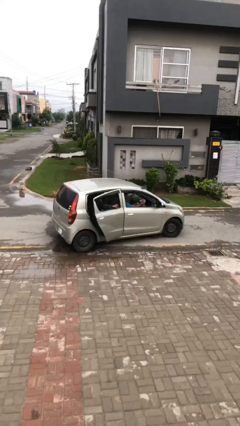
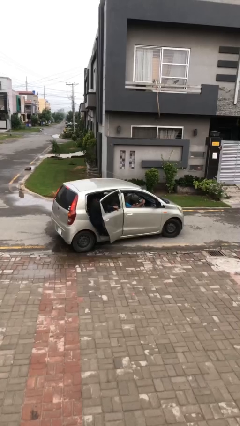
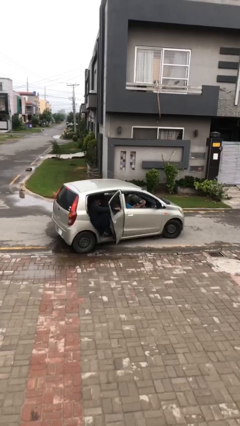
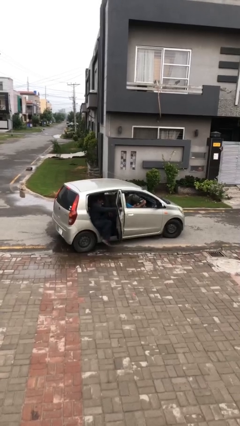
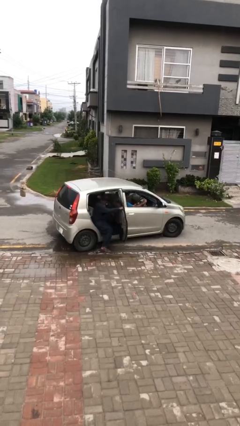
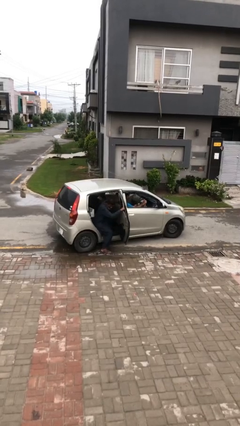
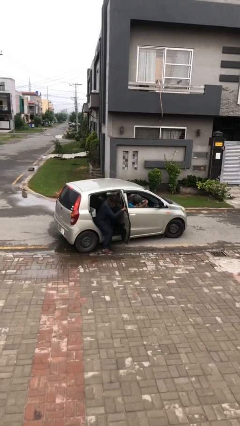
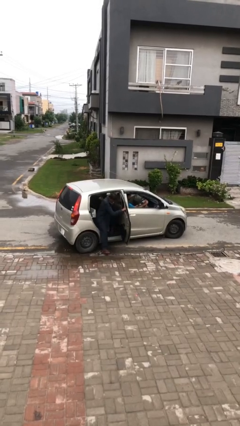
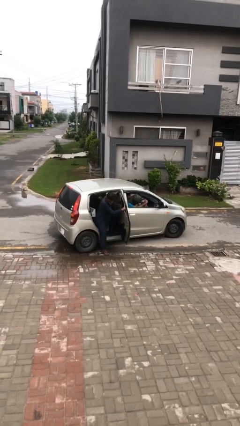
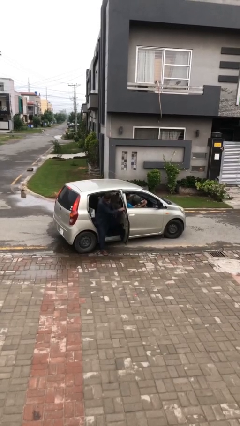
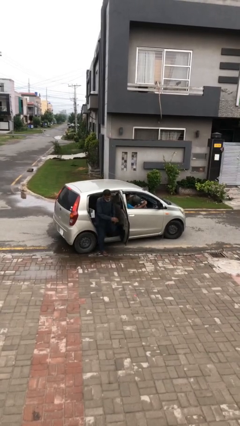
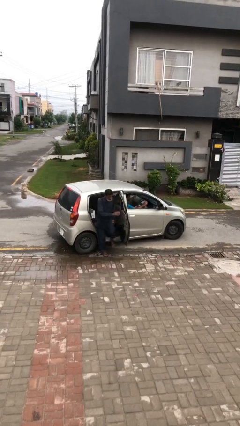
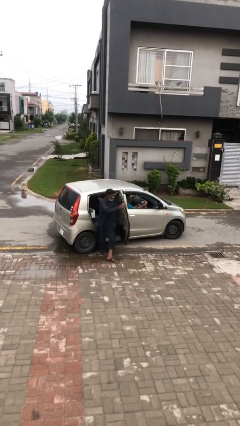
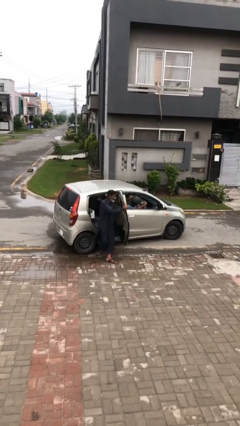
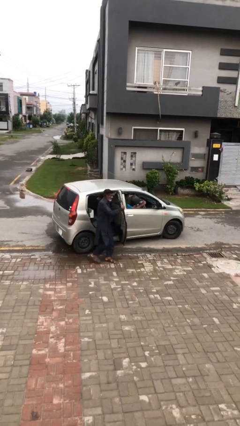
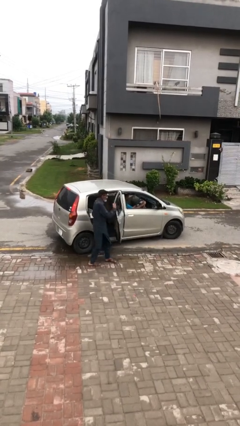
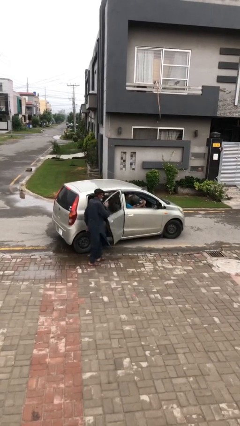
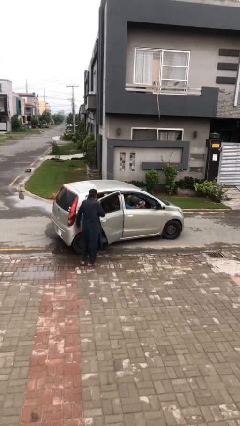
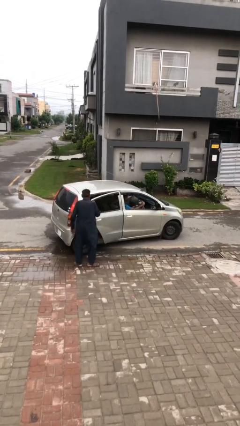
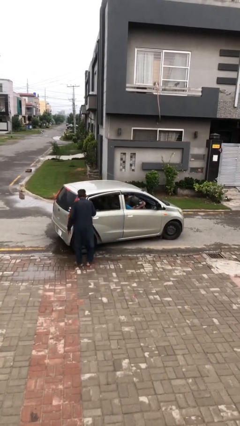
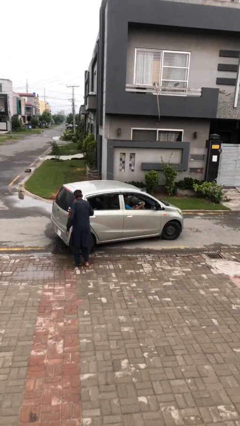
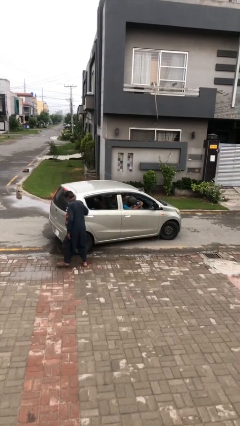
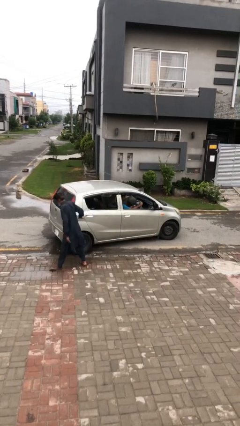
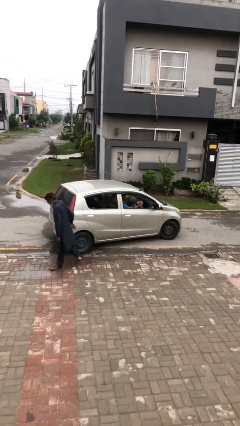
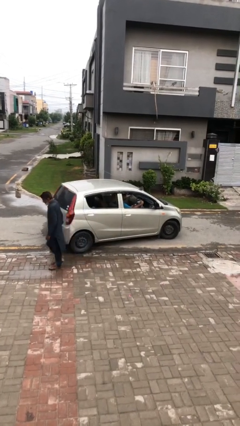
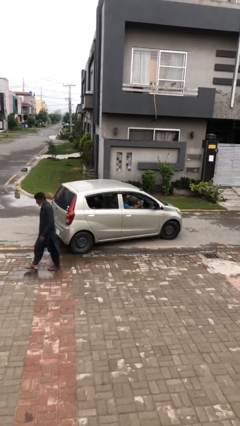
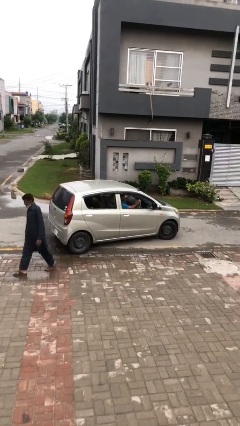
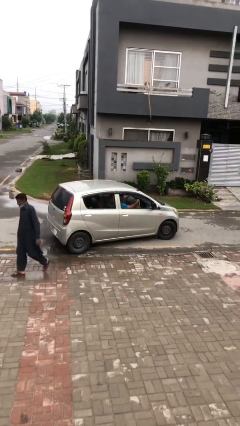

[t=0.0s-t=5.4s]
car drops off person

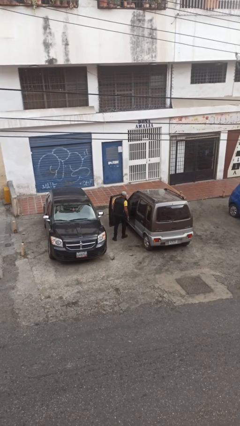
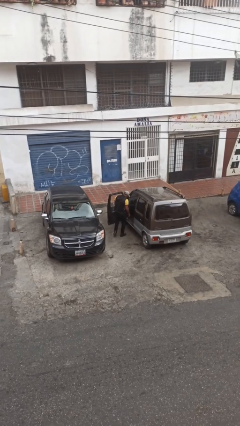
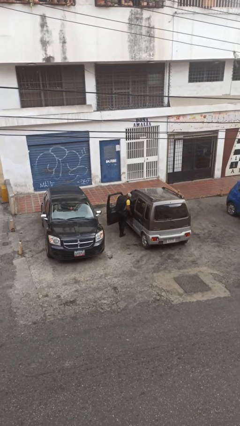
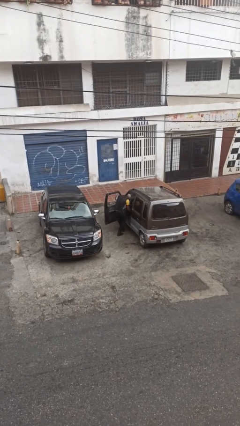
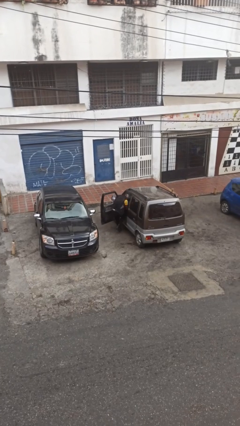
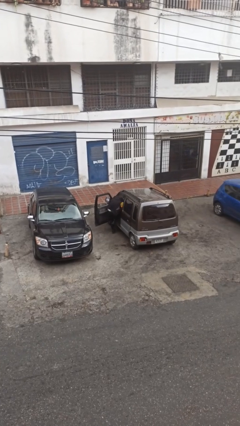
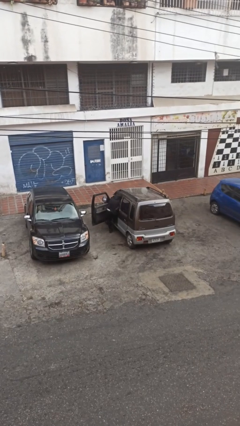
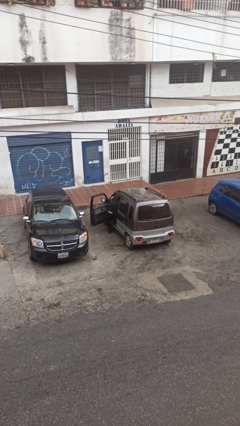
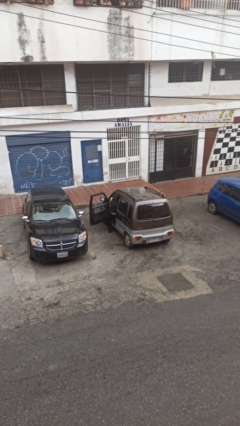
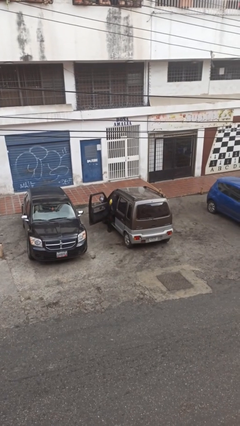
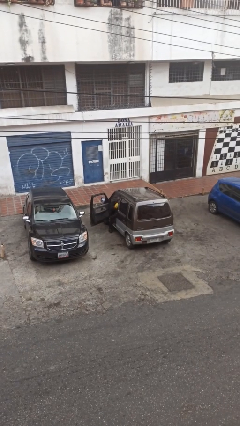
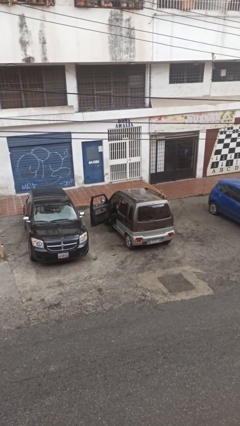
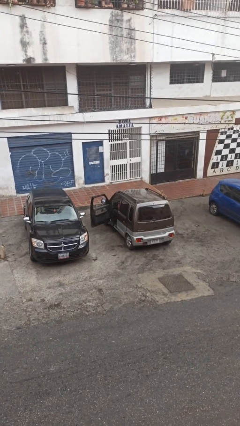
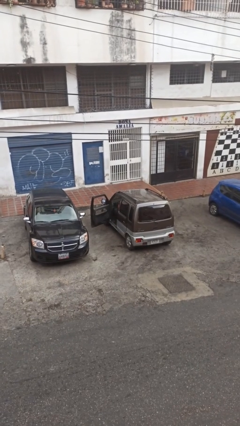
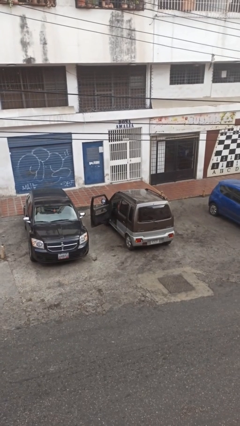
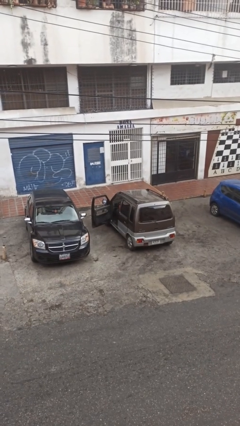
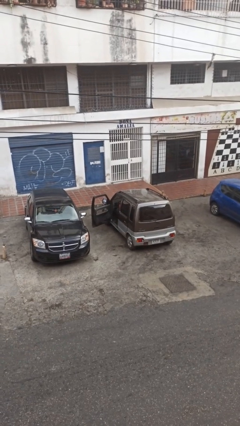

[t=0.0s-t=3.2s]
person enters car

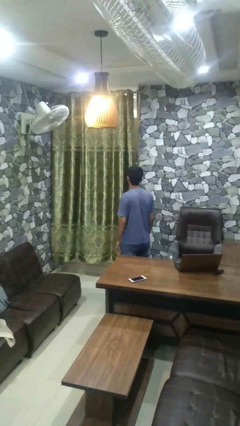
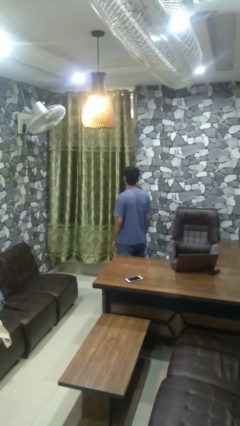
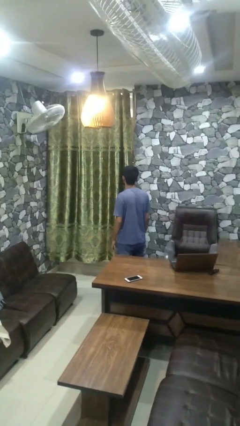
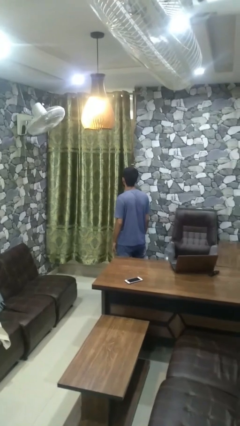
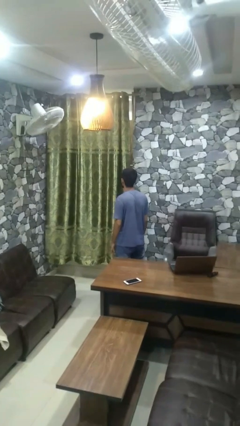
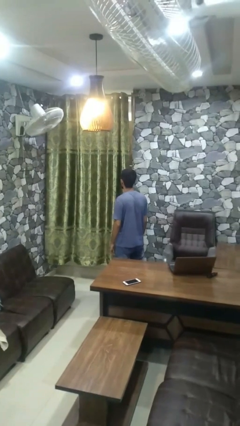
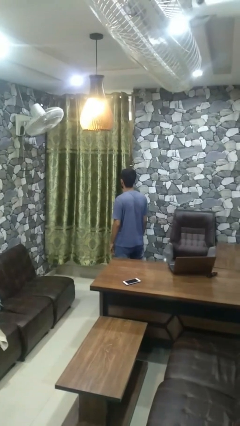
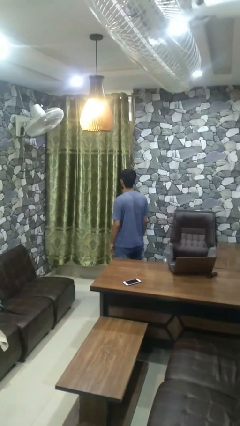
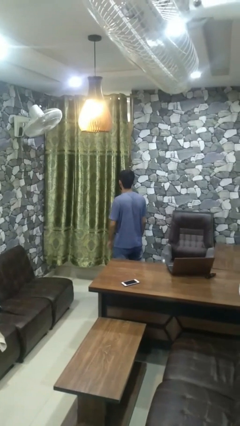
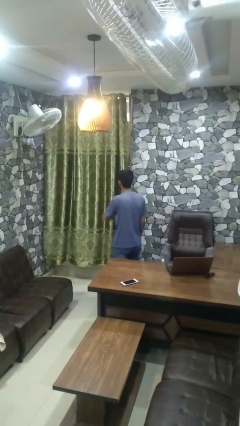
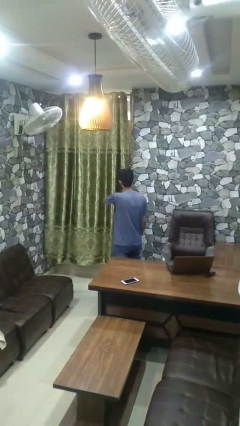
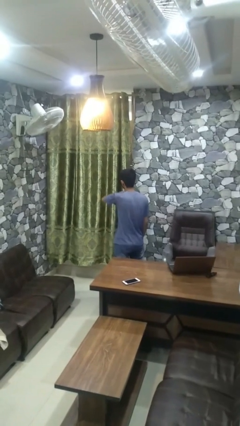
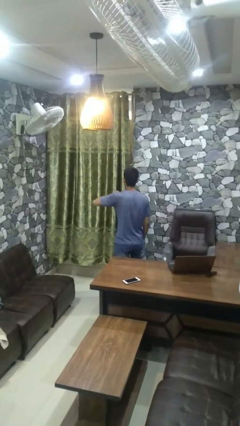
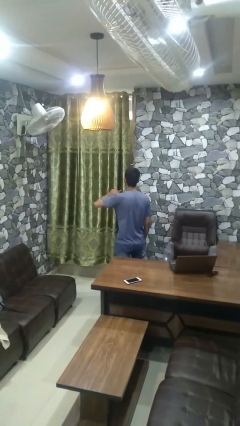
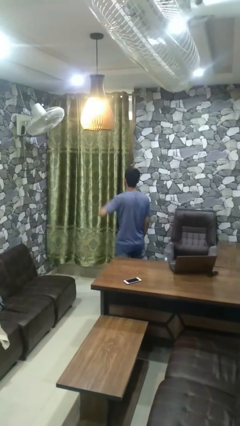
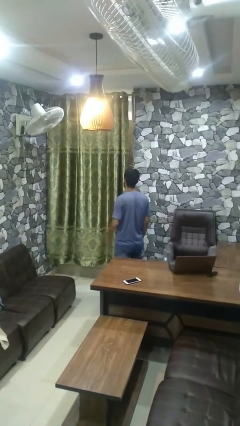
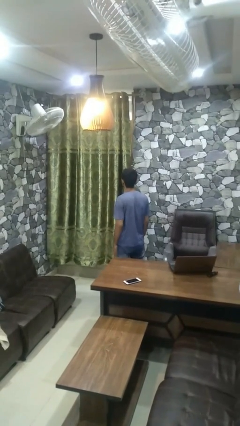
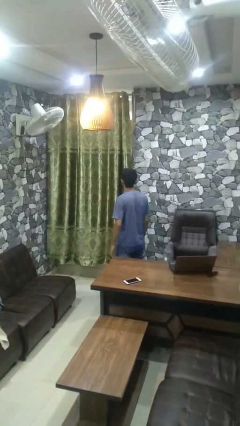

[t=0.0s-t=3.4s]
person gestures cut

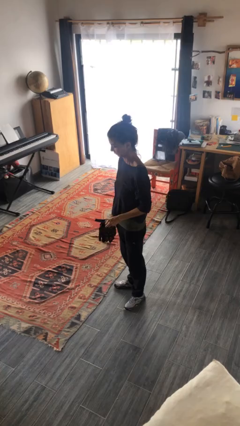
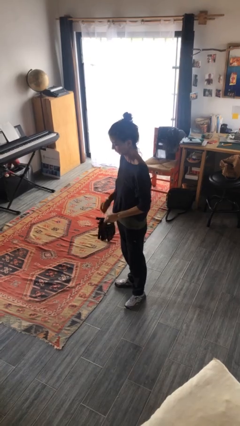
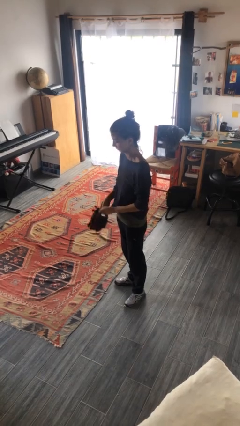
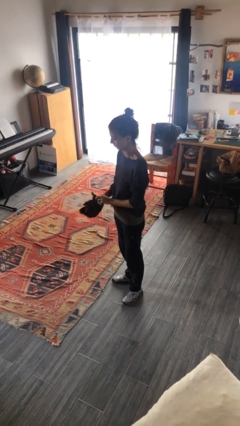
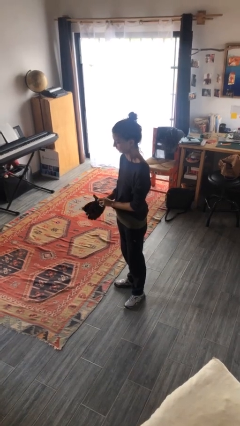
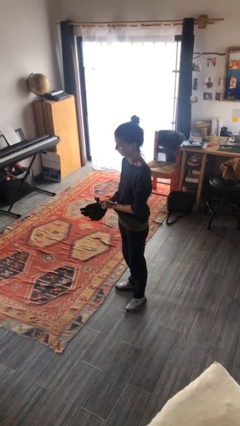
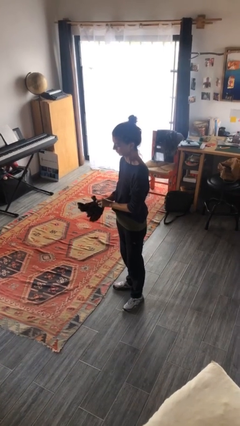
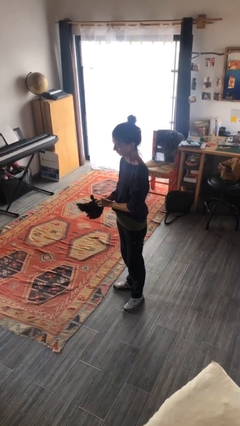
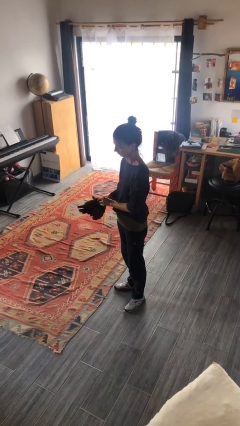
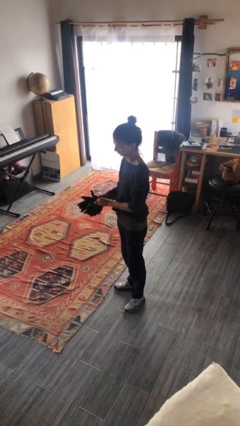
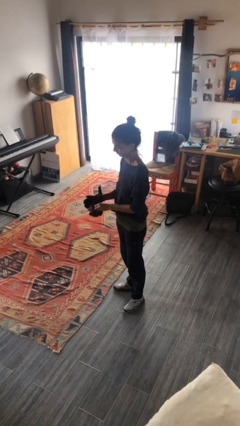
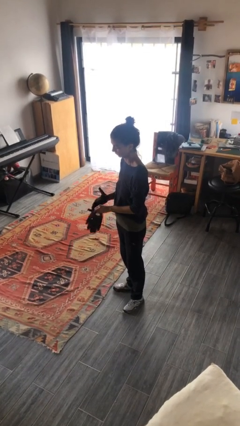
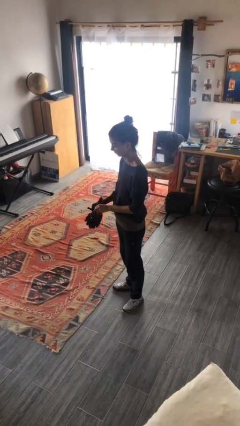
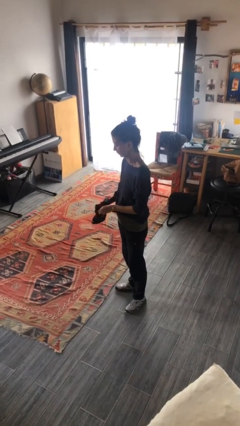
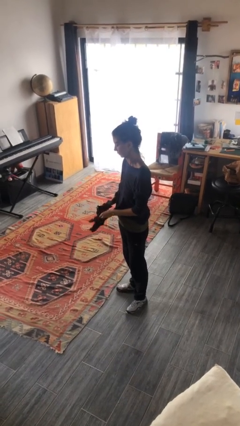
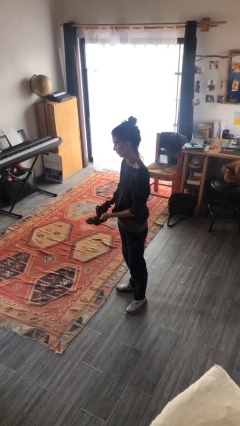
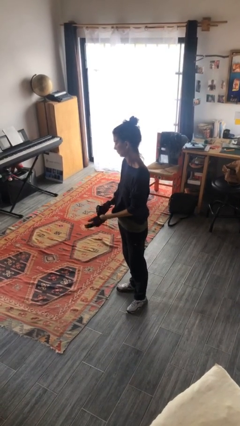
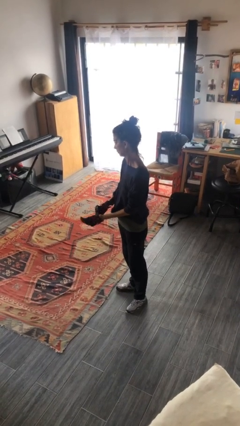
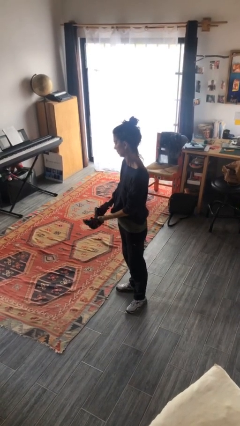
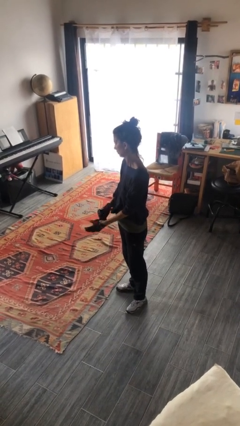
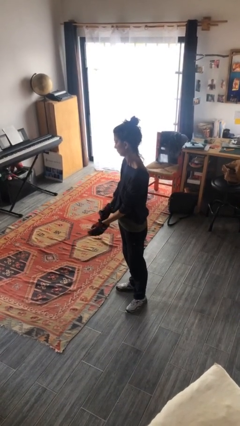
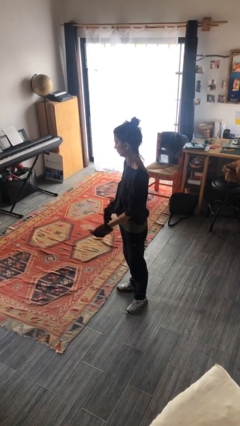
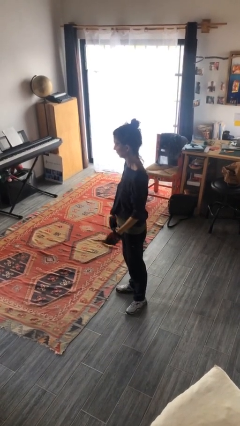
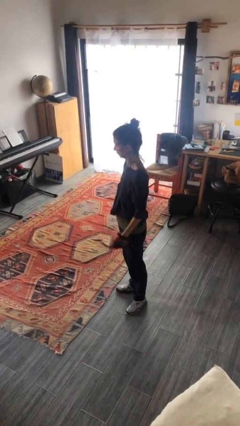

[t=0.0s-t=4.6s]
person puts on gloves

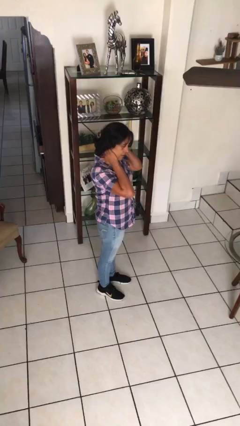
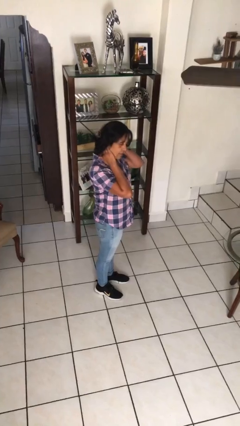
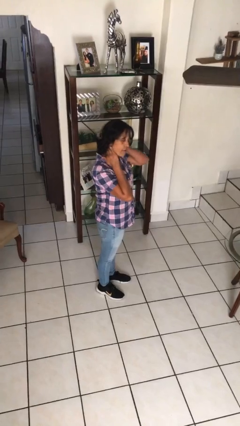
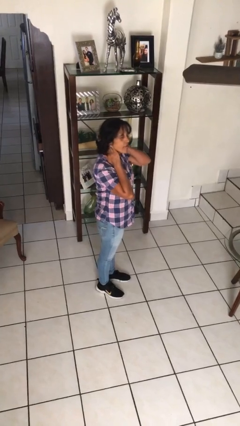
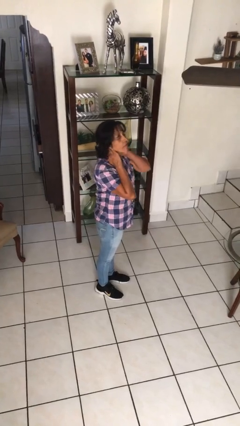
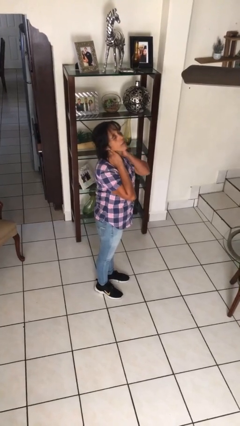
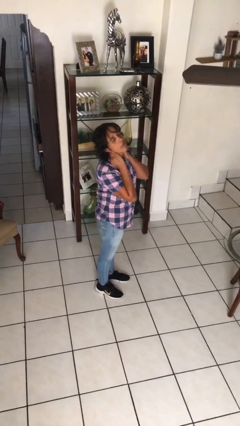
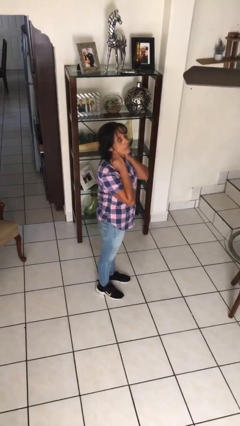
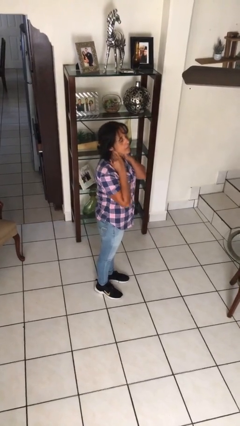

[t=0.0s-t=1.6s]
person rubs neck
